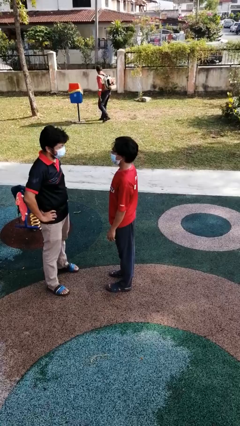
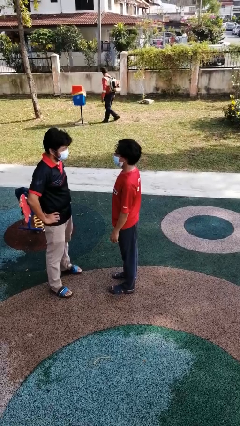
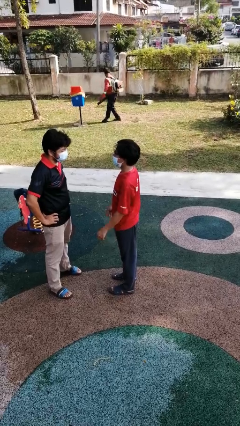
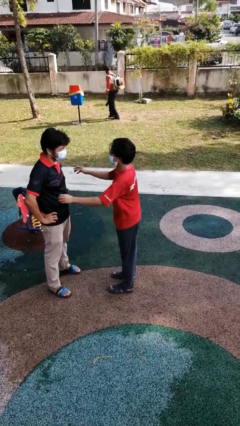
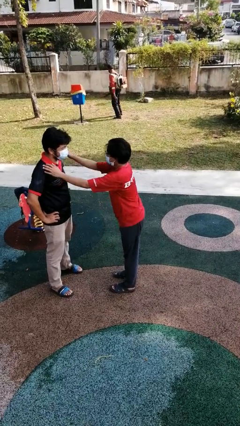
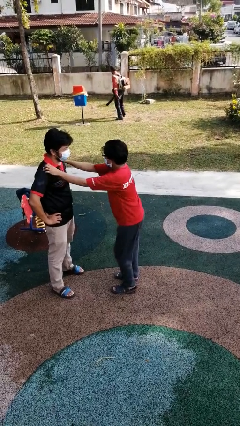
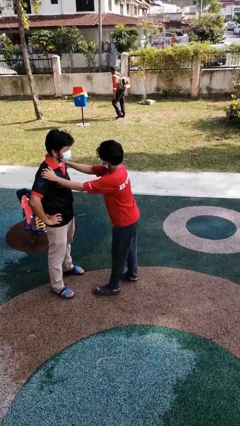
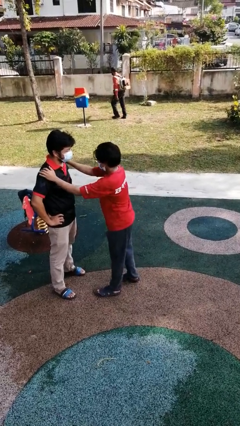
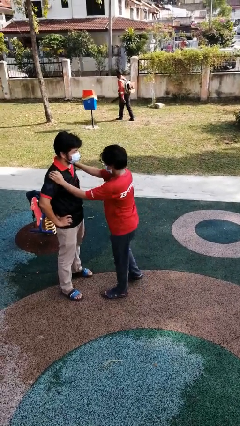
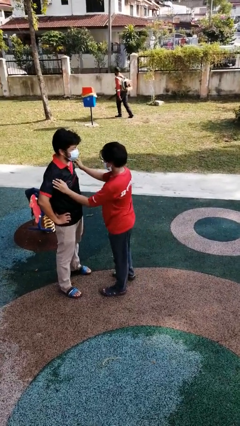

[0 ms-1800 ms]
person pounds shoulders of person

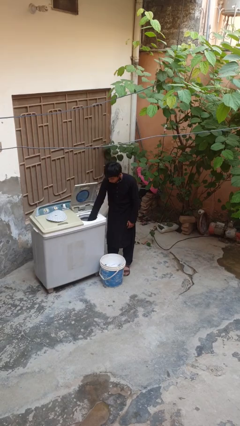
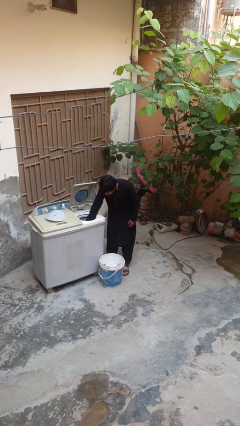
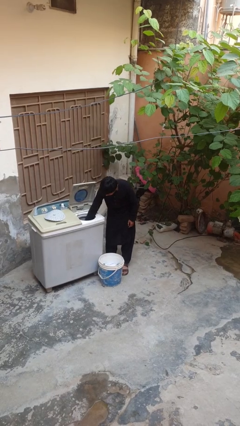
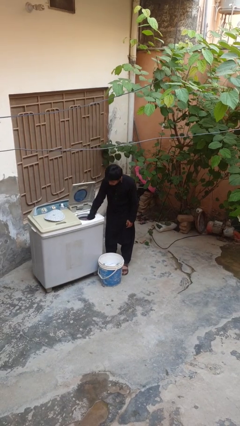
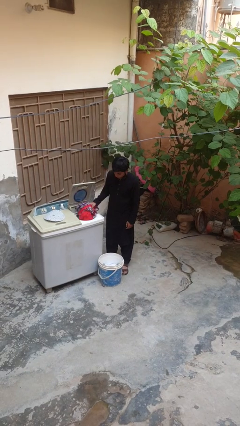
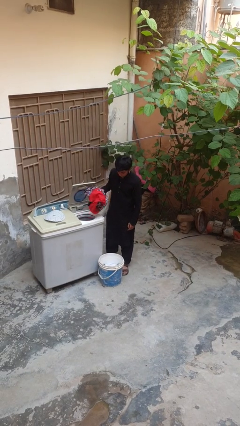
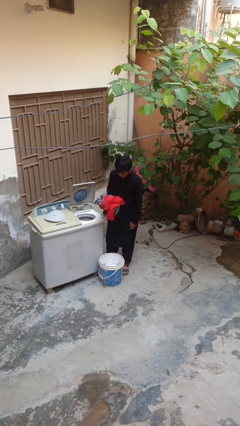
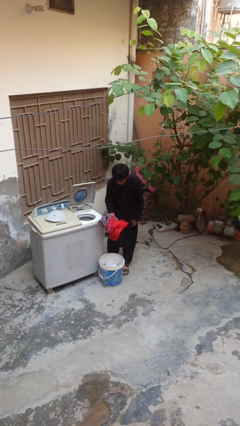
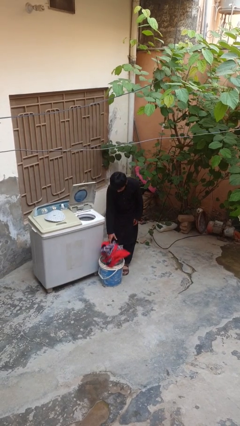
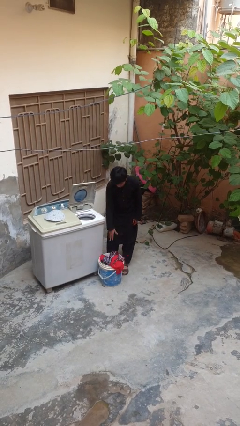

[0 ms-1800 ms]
person unloads dryer

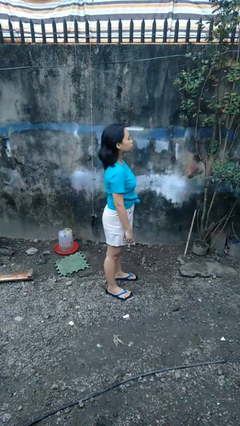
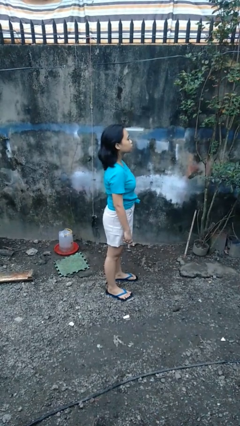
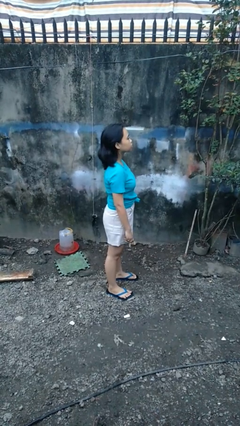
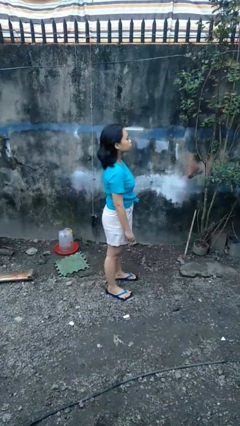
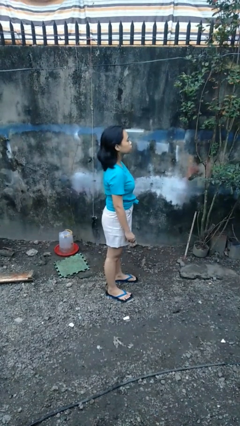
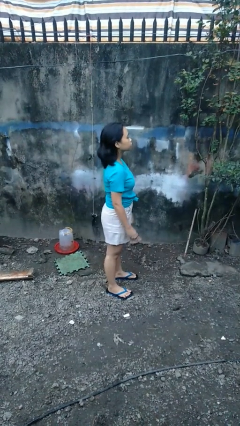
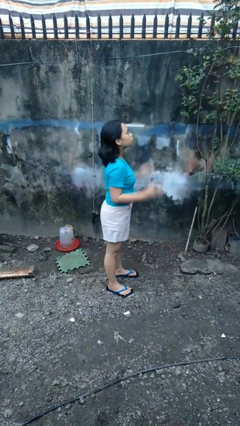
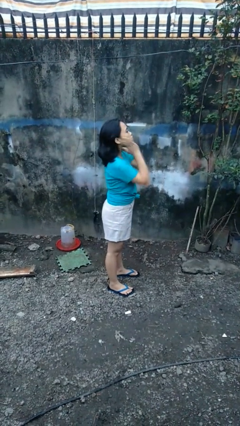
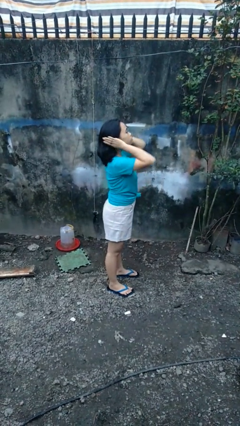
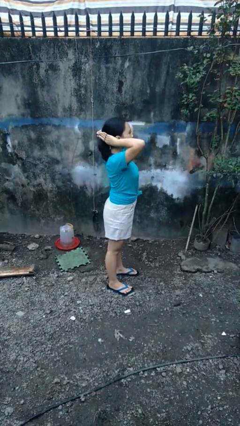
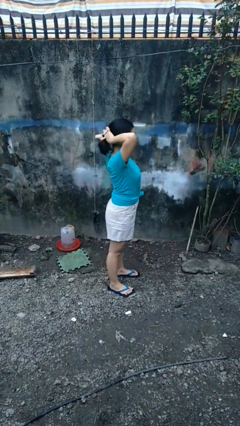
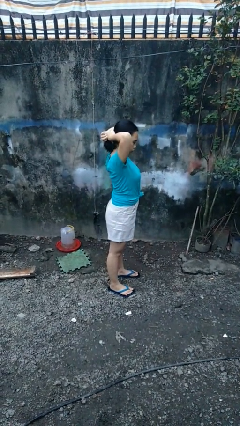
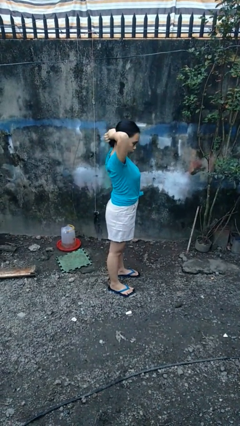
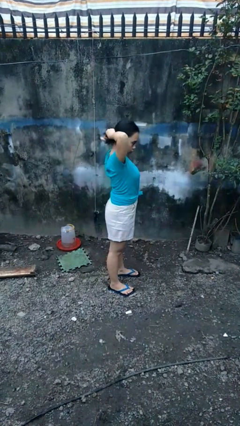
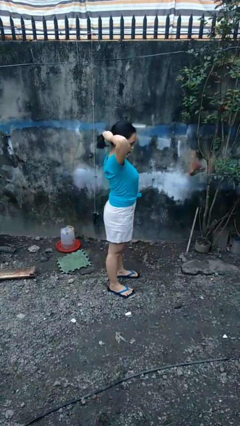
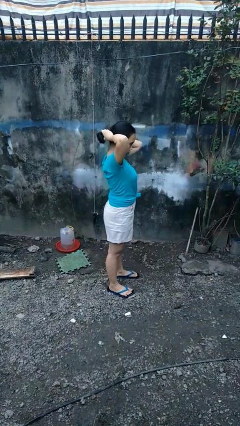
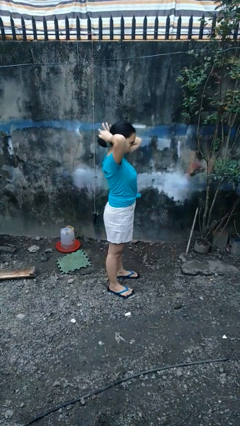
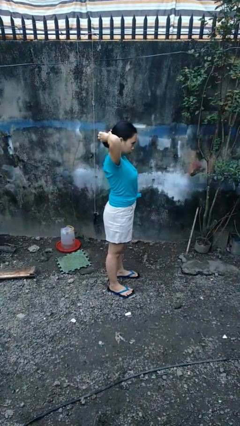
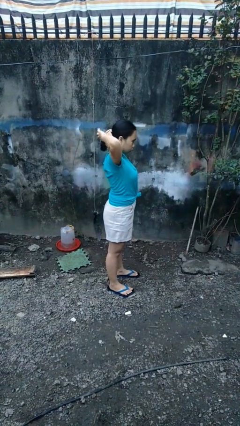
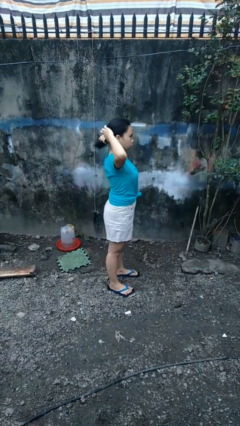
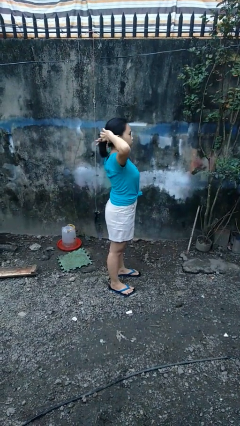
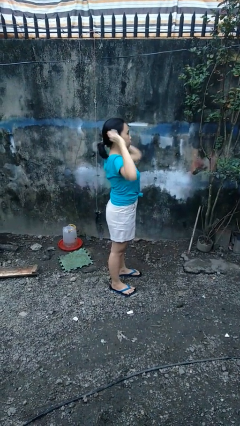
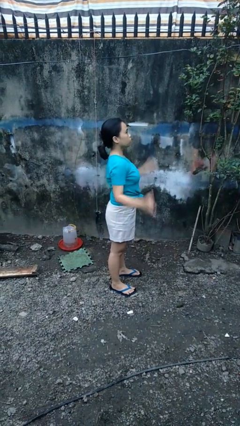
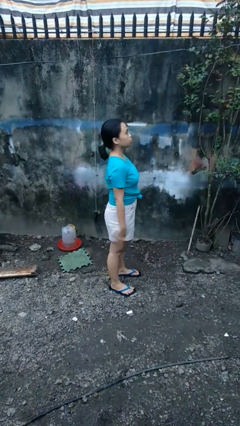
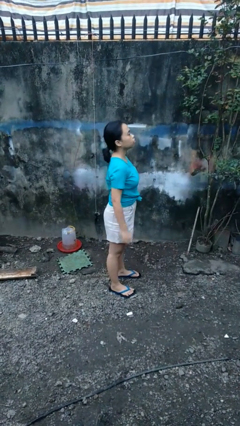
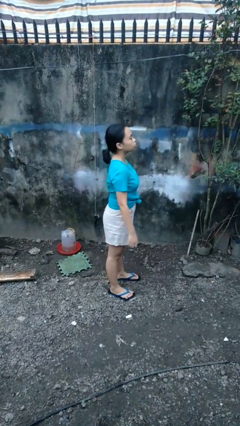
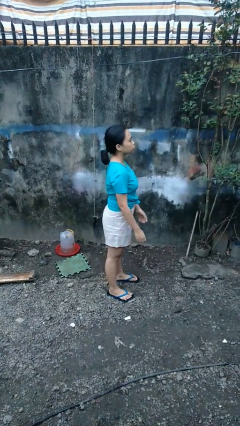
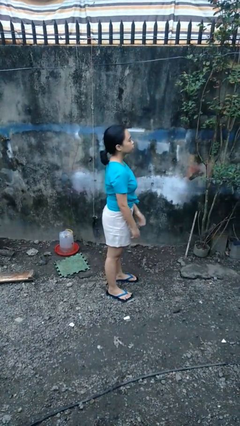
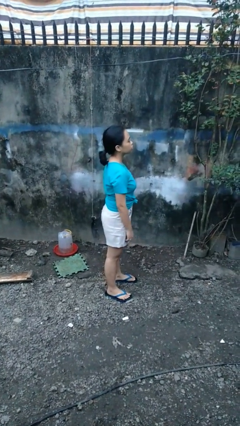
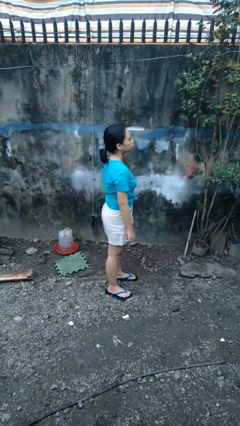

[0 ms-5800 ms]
person puts hair in ponytail

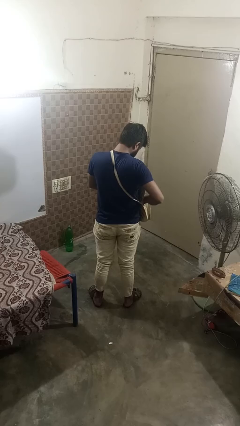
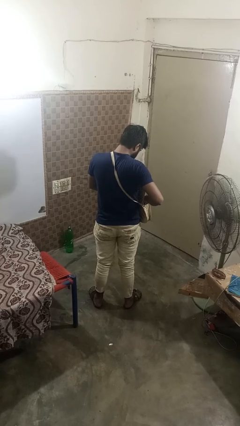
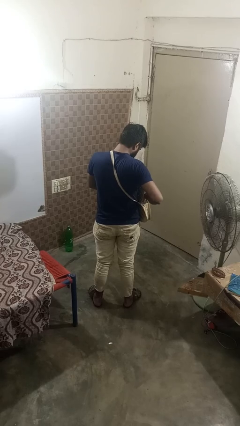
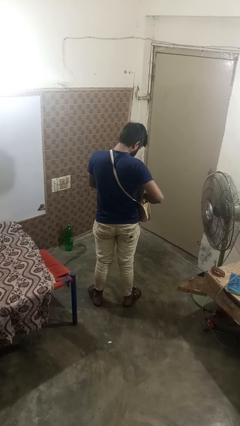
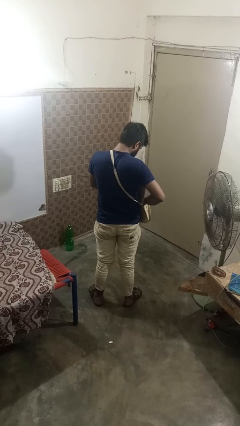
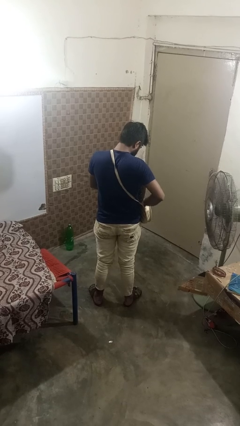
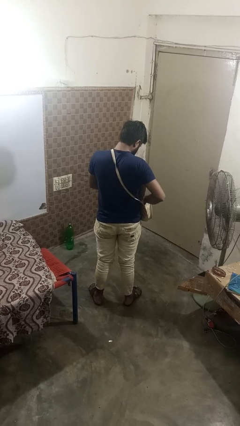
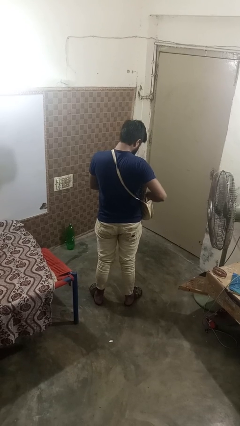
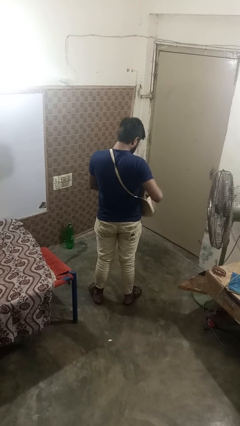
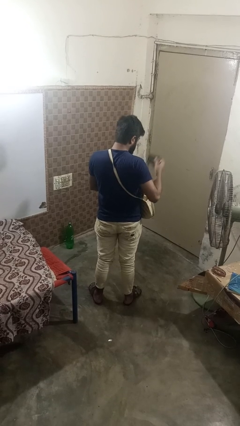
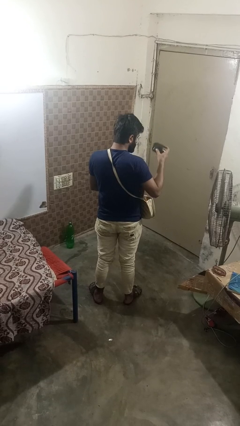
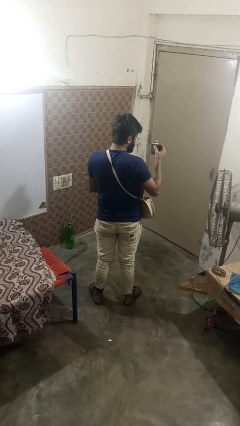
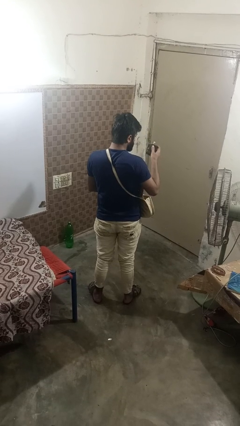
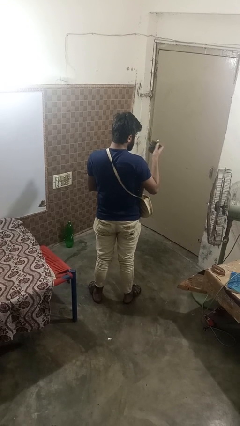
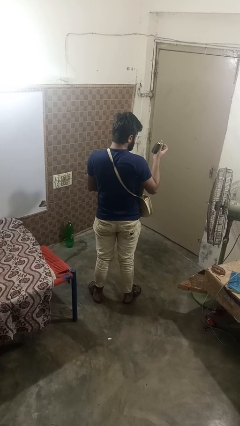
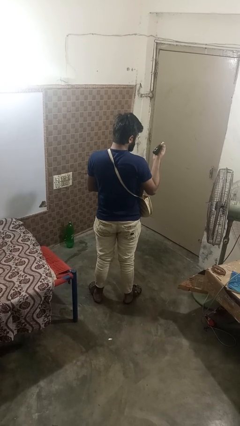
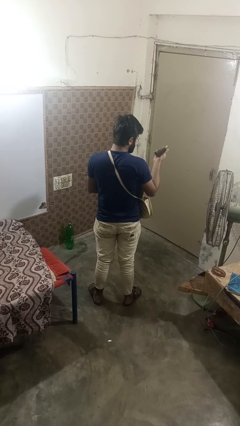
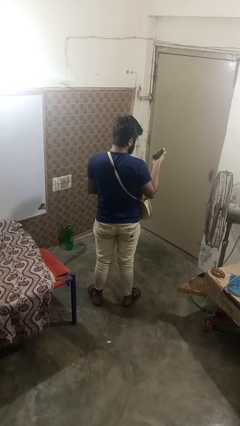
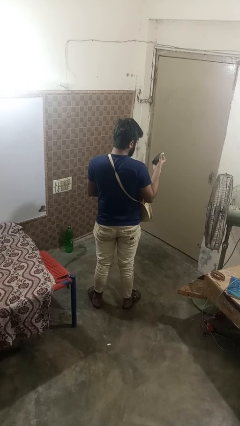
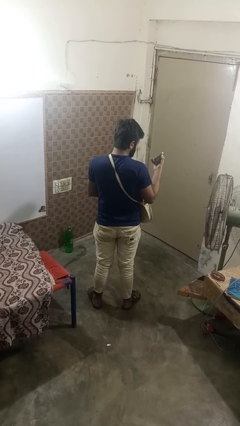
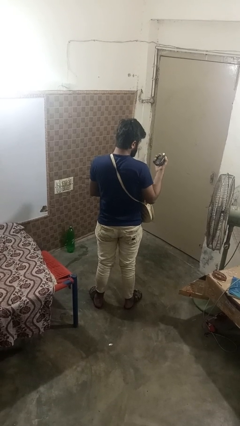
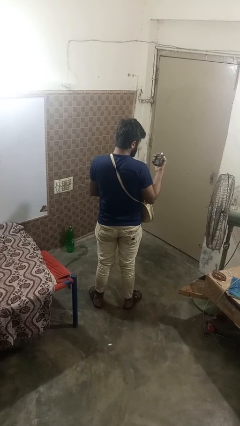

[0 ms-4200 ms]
person takes object from purse

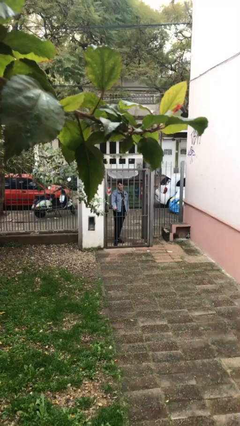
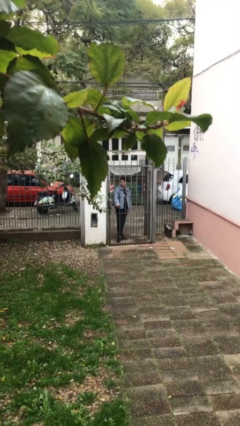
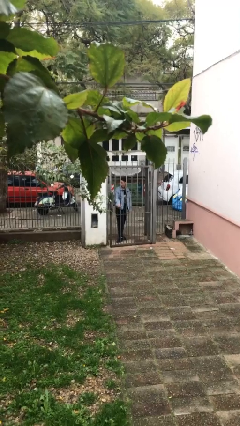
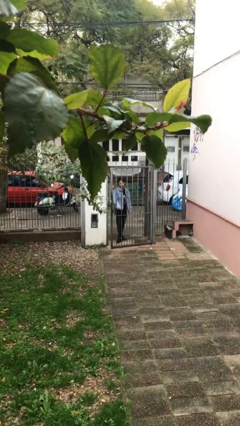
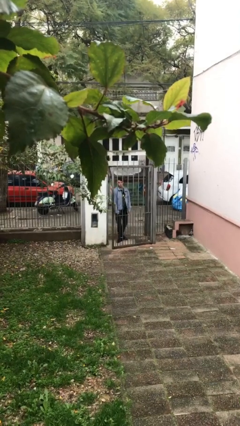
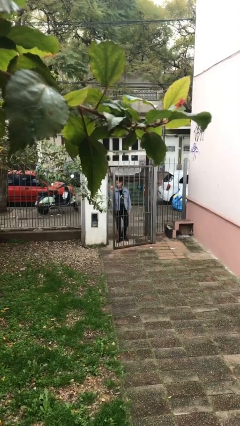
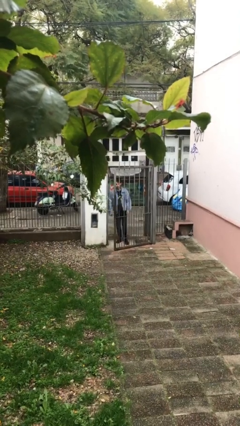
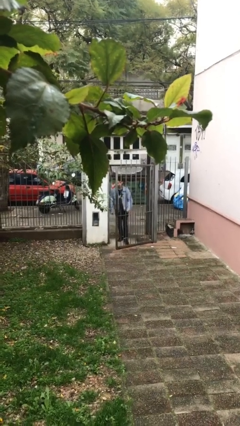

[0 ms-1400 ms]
person opens facility door

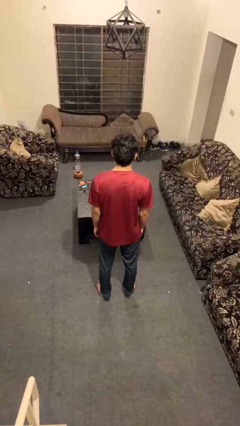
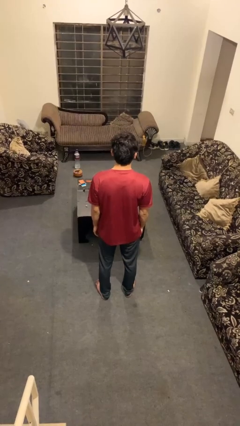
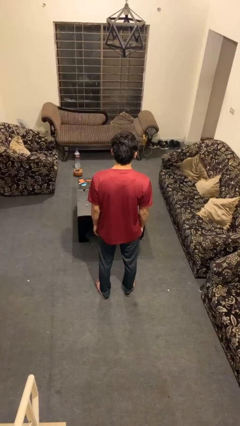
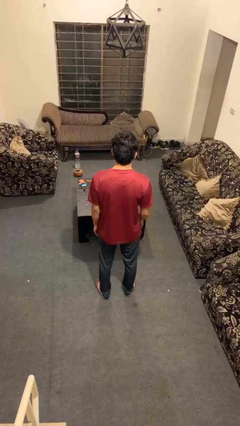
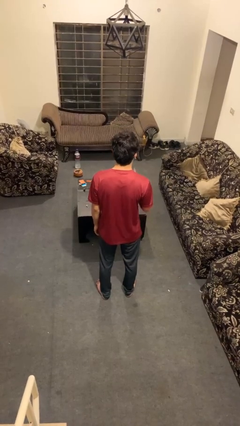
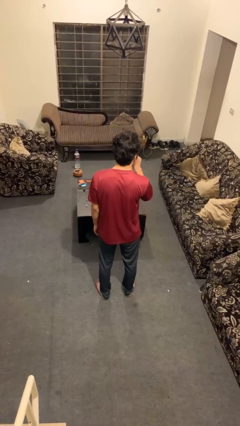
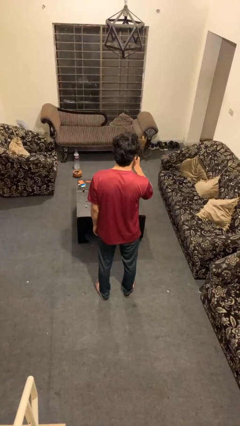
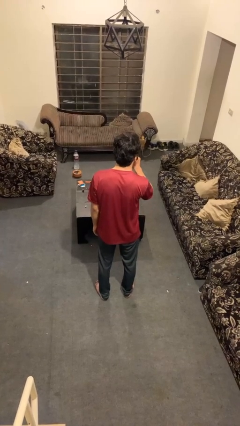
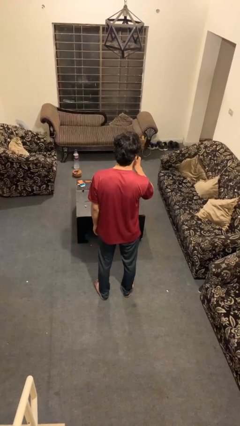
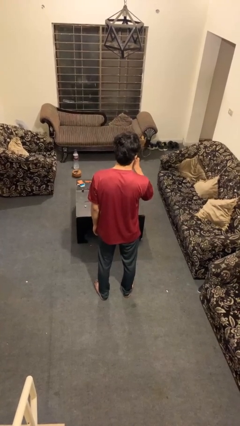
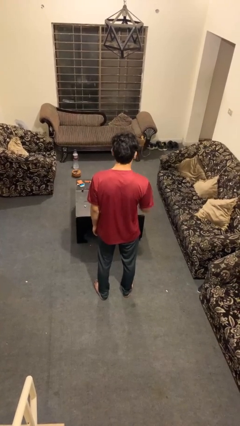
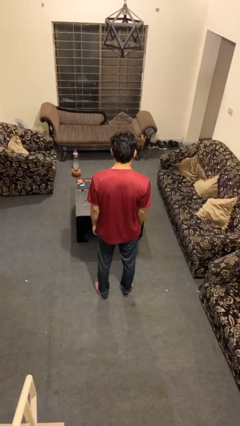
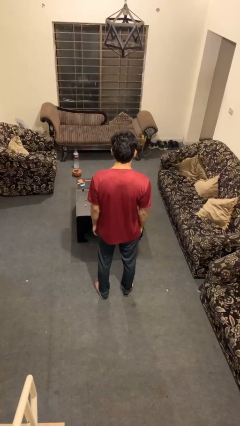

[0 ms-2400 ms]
person gestures be quiet
